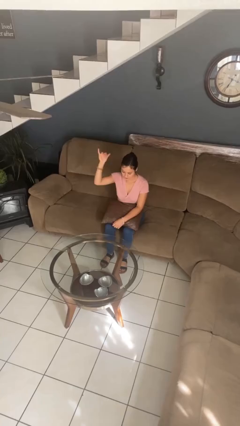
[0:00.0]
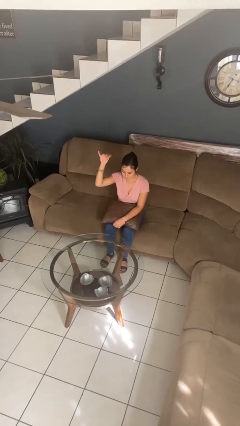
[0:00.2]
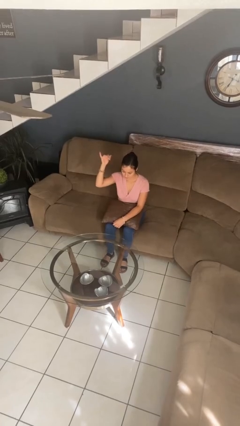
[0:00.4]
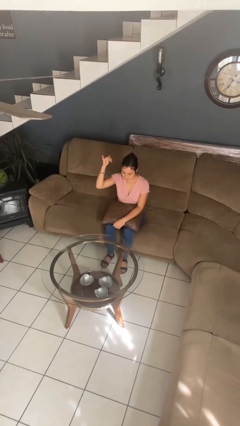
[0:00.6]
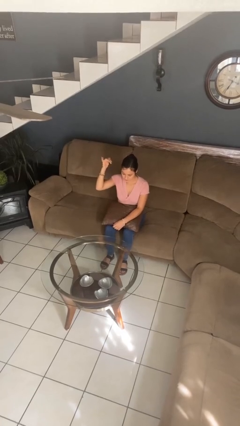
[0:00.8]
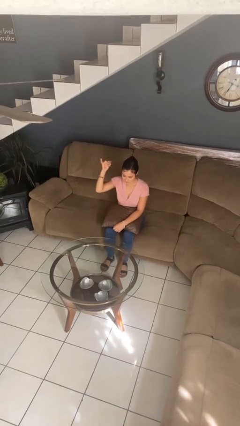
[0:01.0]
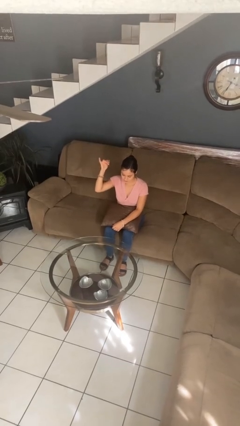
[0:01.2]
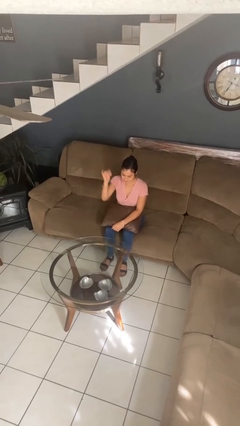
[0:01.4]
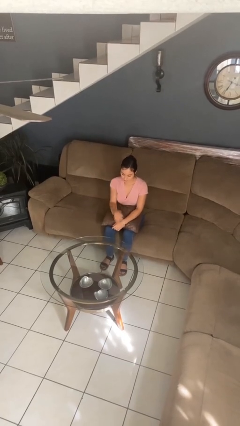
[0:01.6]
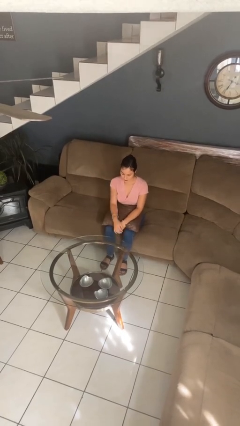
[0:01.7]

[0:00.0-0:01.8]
person gestures hang loose

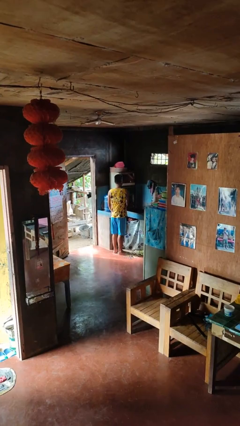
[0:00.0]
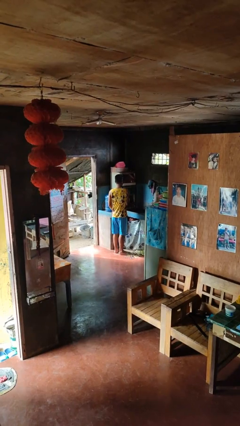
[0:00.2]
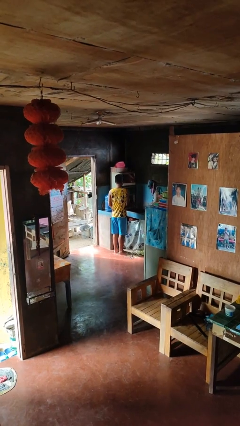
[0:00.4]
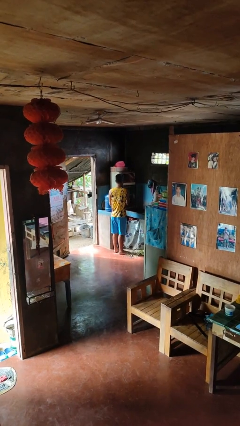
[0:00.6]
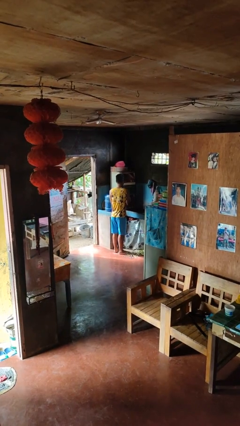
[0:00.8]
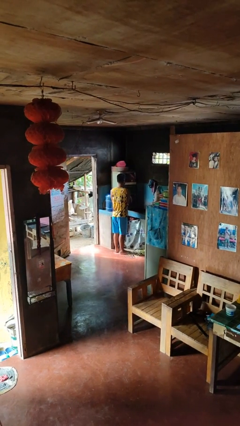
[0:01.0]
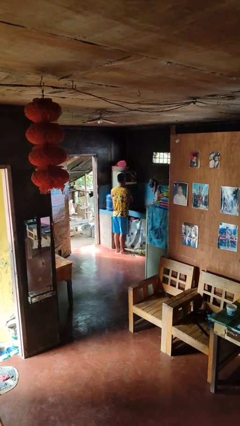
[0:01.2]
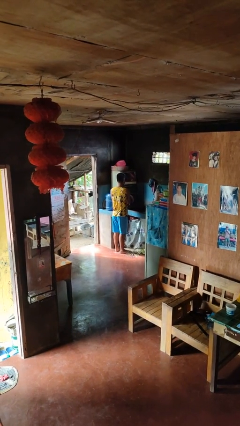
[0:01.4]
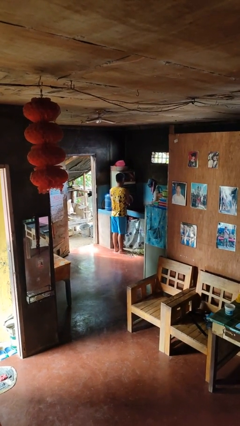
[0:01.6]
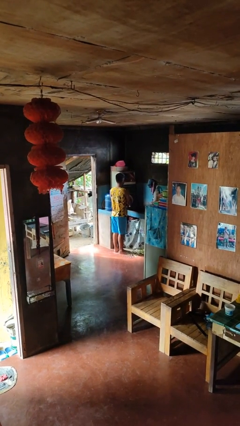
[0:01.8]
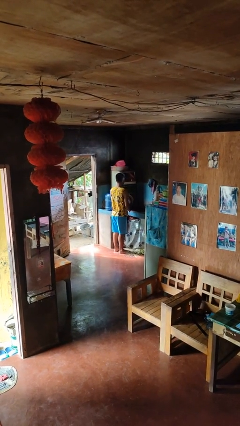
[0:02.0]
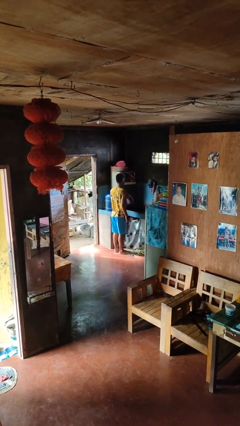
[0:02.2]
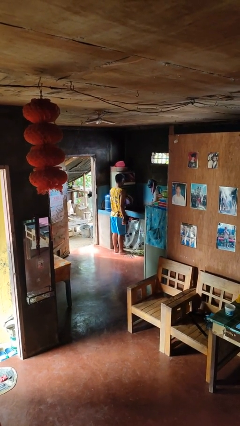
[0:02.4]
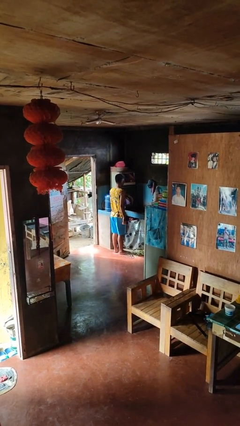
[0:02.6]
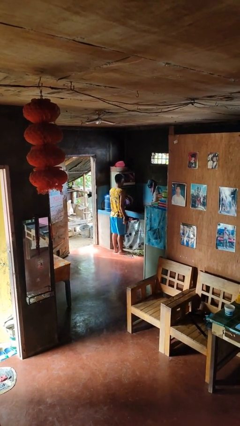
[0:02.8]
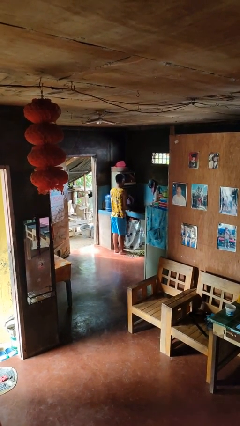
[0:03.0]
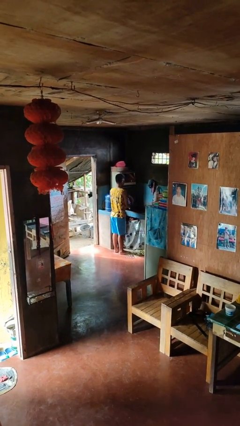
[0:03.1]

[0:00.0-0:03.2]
person opens dishwasher

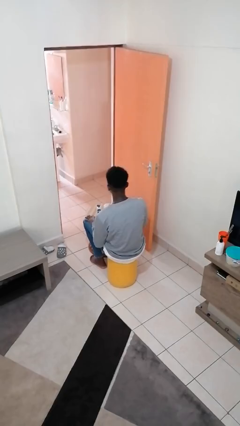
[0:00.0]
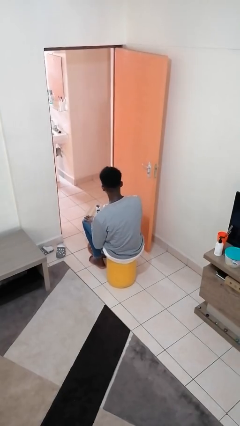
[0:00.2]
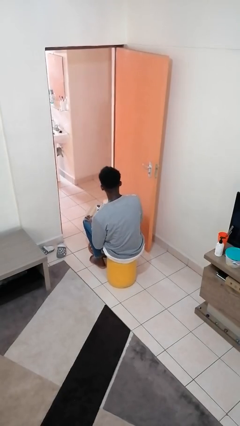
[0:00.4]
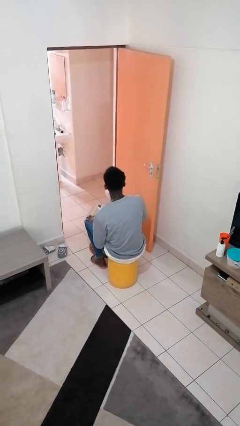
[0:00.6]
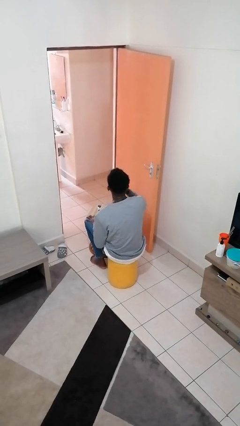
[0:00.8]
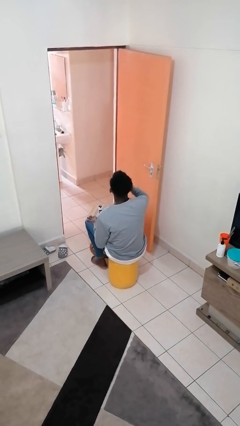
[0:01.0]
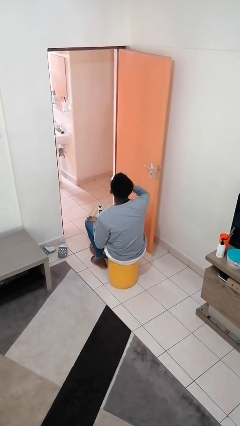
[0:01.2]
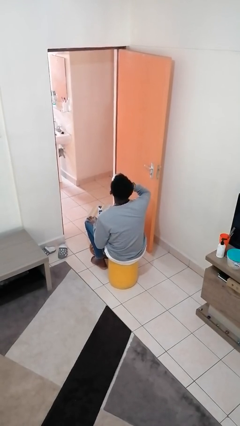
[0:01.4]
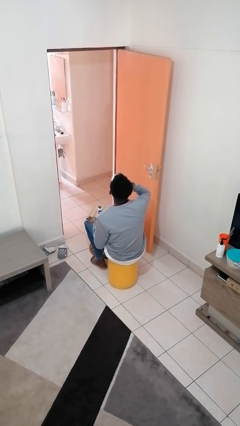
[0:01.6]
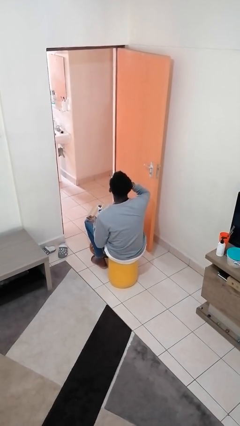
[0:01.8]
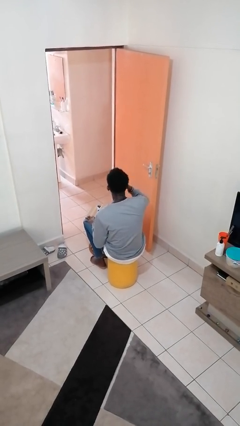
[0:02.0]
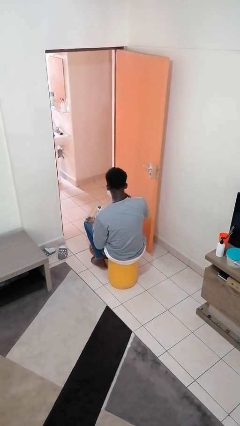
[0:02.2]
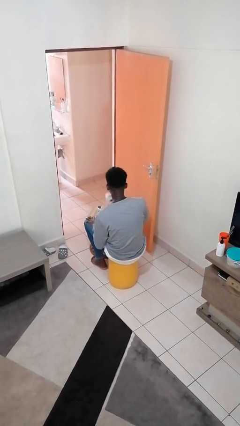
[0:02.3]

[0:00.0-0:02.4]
person drinks from cup

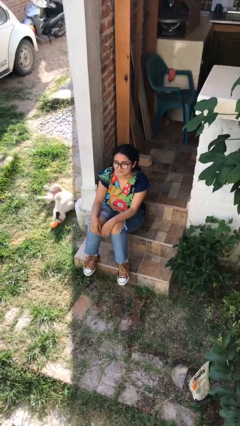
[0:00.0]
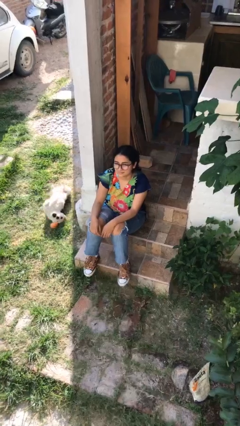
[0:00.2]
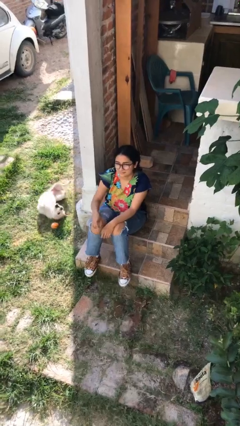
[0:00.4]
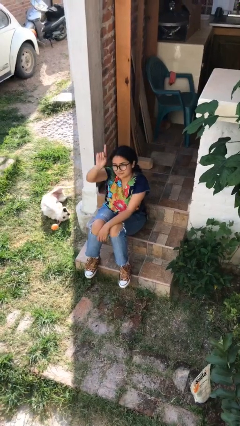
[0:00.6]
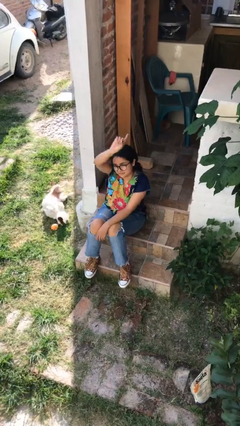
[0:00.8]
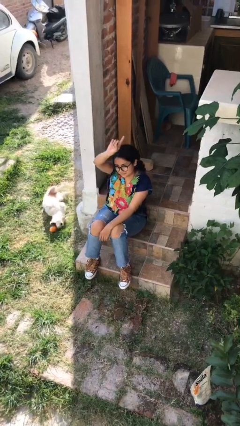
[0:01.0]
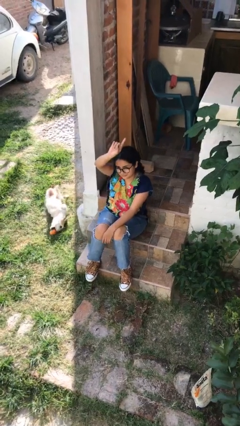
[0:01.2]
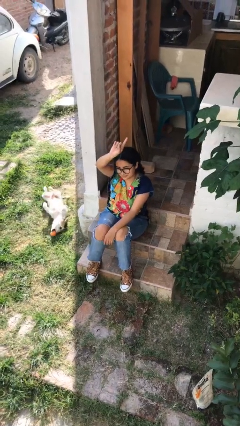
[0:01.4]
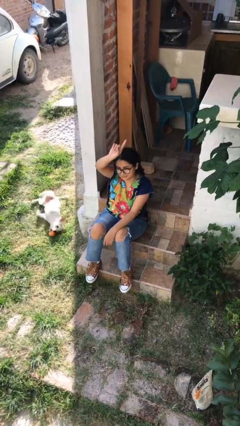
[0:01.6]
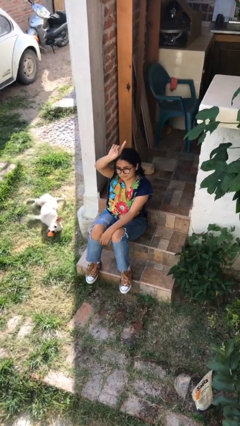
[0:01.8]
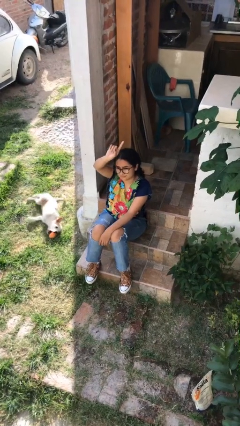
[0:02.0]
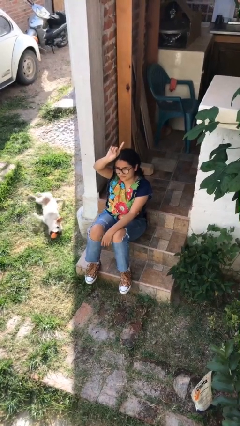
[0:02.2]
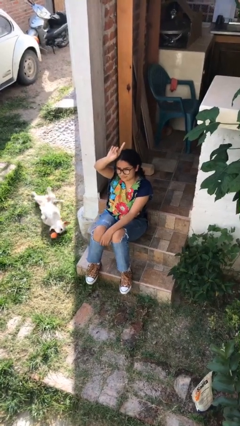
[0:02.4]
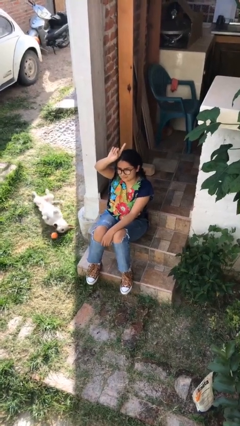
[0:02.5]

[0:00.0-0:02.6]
person gestures raise hand

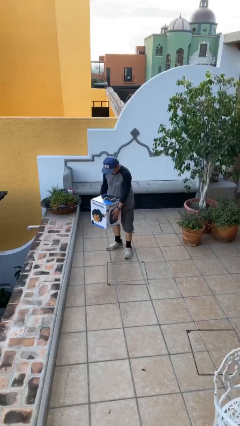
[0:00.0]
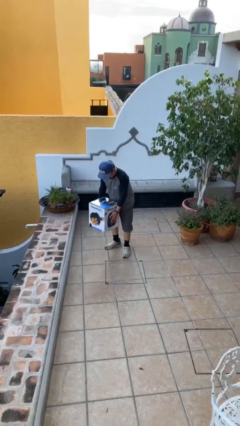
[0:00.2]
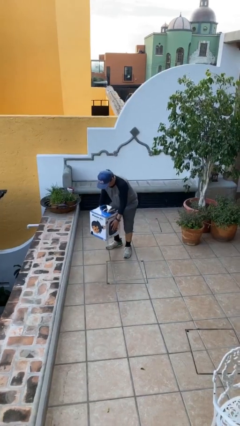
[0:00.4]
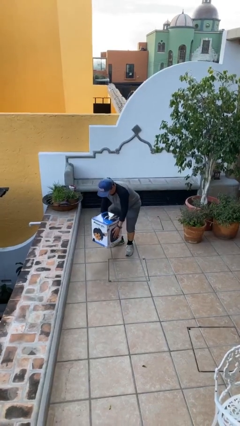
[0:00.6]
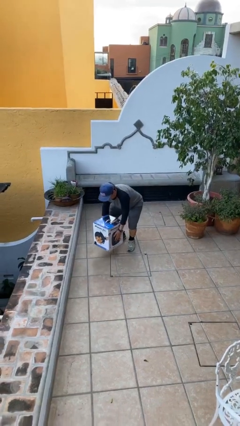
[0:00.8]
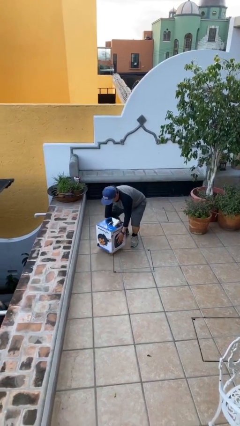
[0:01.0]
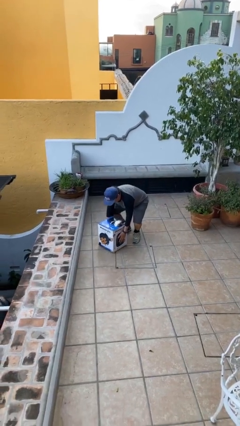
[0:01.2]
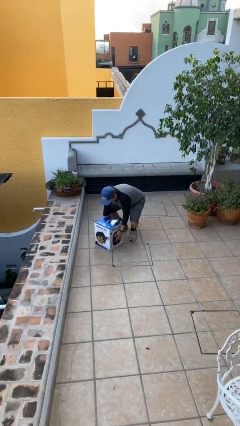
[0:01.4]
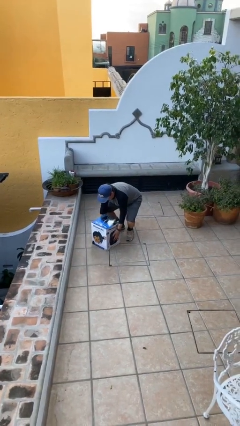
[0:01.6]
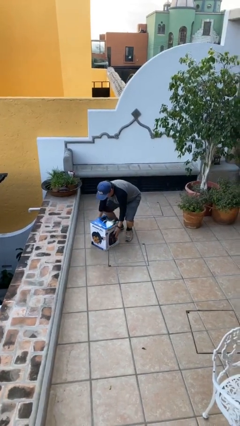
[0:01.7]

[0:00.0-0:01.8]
person puts down object on floor

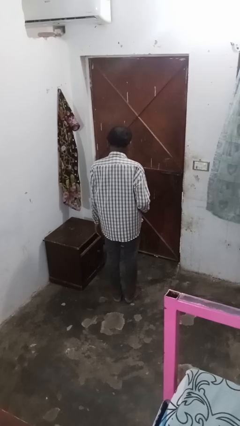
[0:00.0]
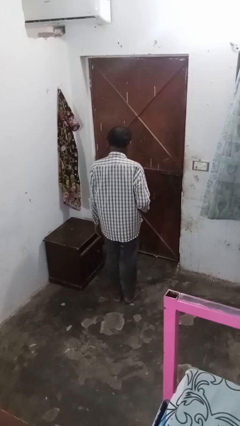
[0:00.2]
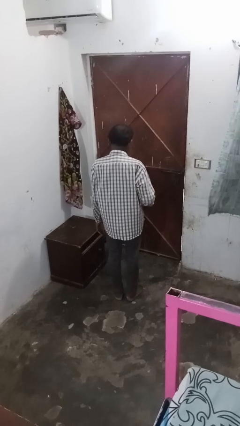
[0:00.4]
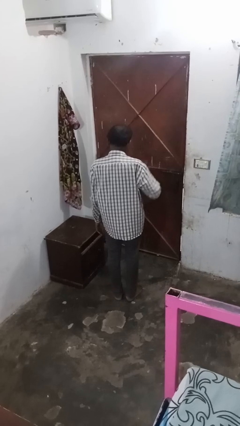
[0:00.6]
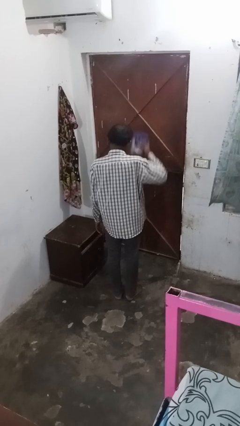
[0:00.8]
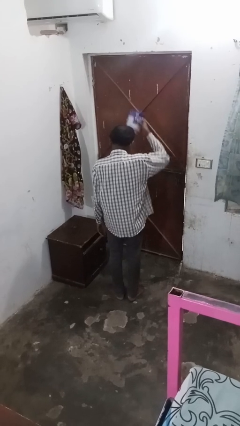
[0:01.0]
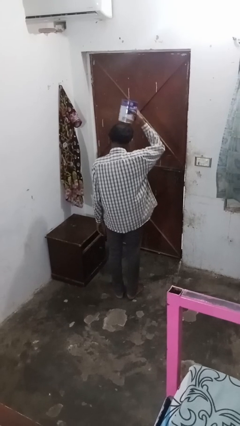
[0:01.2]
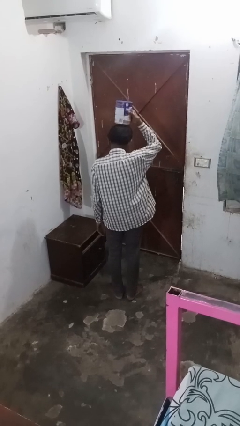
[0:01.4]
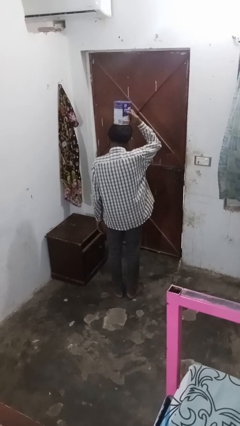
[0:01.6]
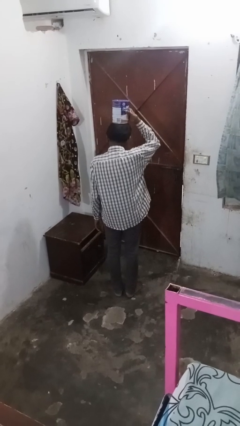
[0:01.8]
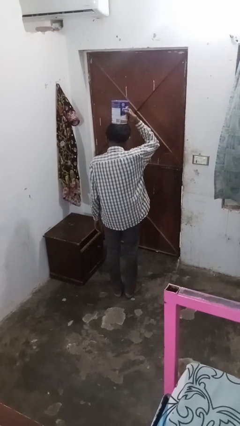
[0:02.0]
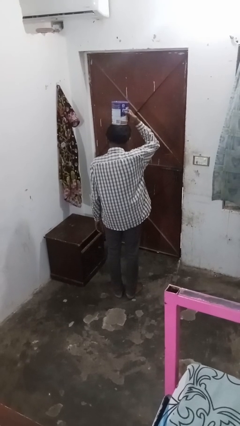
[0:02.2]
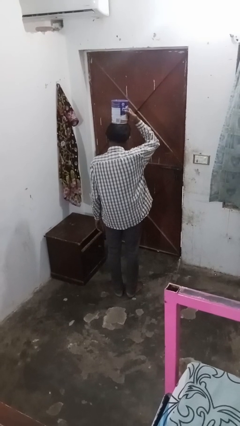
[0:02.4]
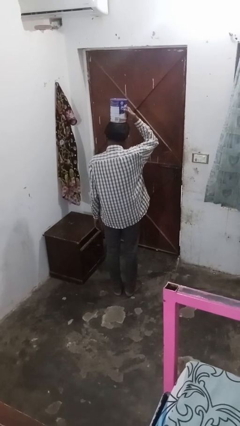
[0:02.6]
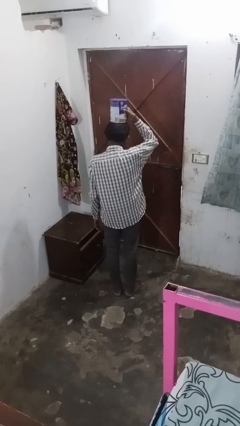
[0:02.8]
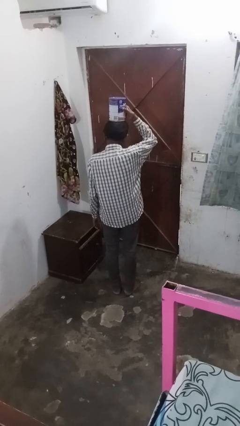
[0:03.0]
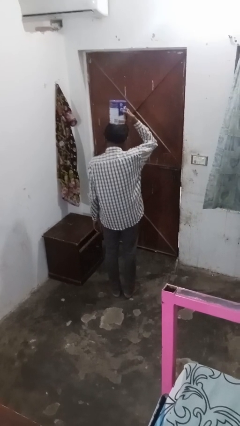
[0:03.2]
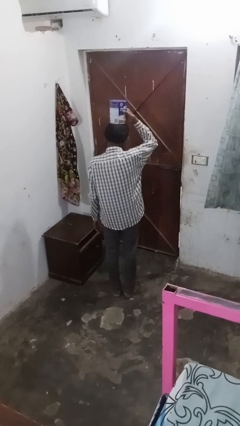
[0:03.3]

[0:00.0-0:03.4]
person holds object above head

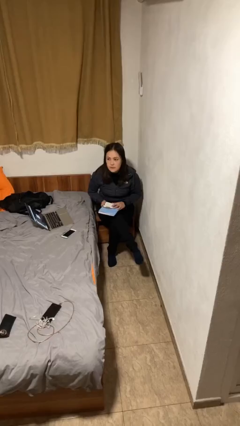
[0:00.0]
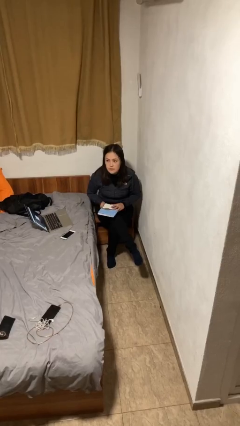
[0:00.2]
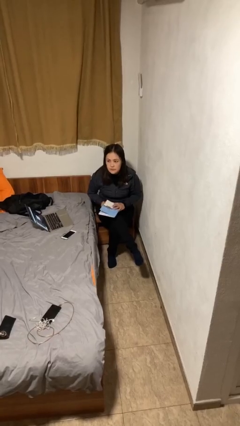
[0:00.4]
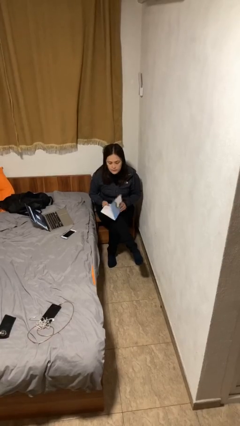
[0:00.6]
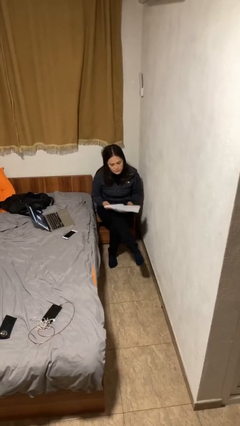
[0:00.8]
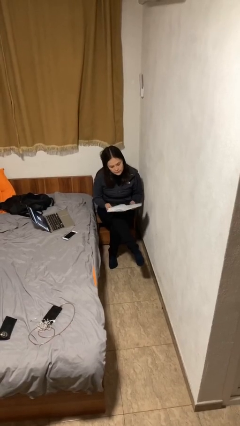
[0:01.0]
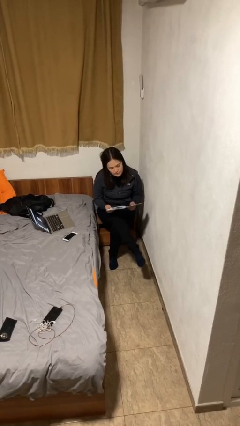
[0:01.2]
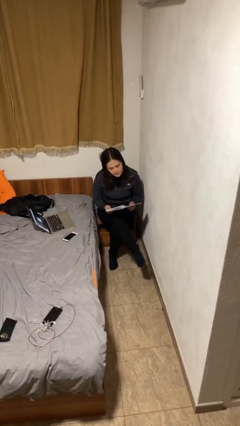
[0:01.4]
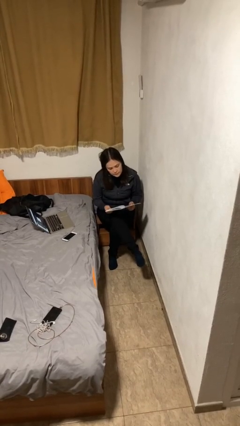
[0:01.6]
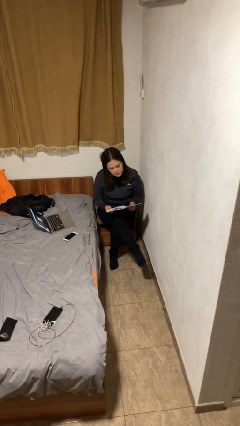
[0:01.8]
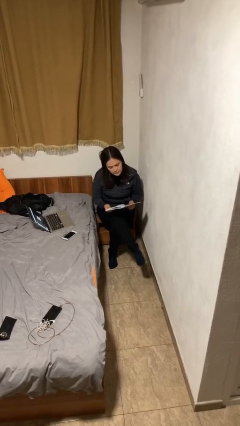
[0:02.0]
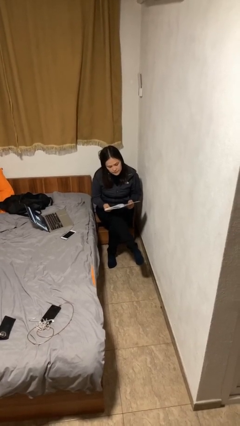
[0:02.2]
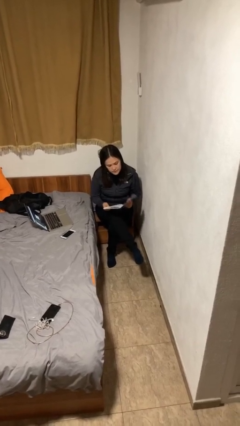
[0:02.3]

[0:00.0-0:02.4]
person reads document
